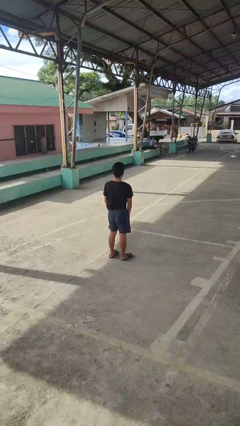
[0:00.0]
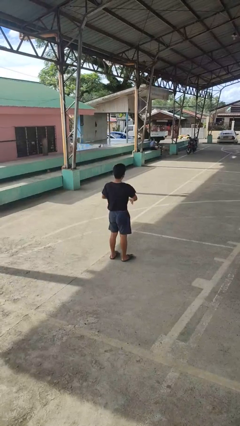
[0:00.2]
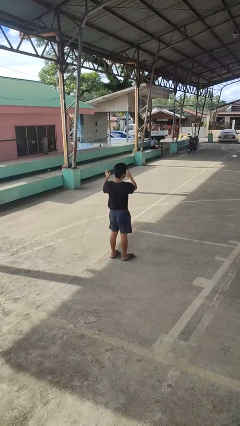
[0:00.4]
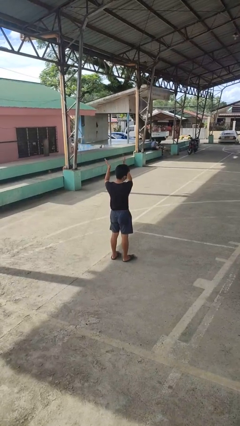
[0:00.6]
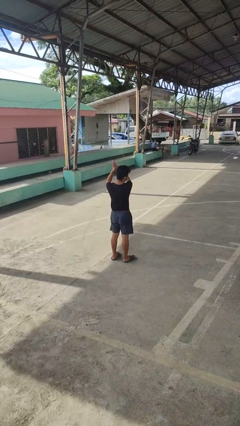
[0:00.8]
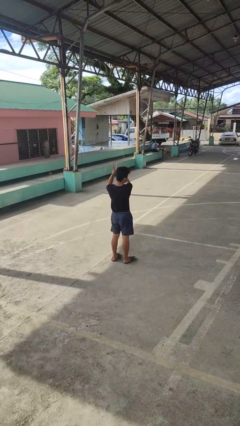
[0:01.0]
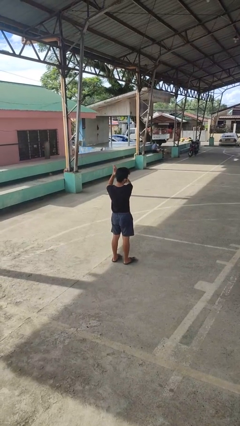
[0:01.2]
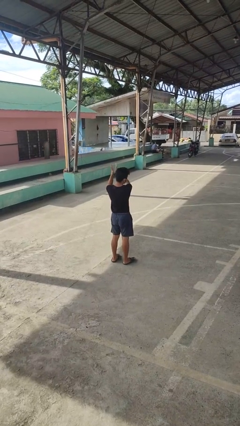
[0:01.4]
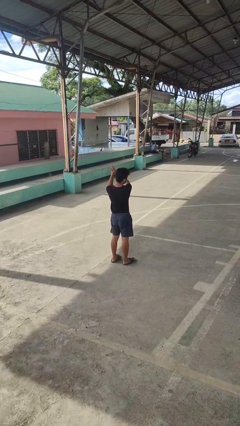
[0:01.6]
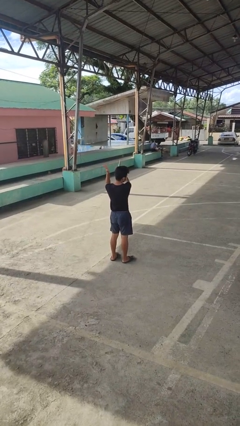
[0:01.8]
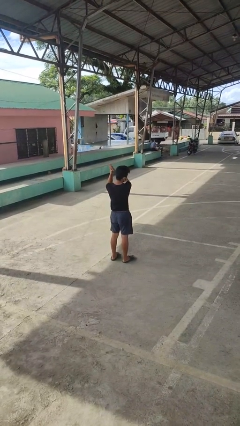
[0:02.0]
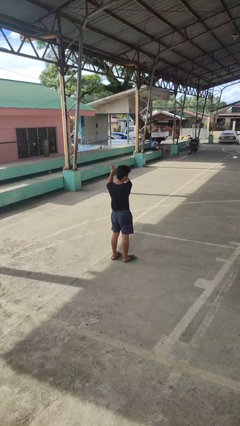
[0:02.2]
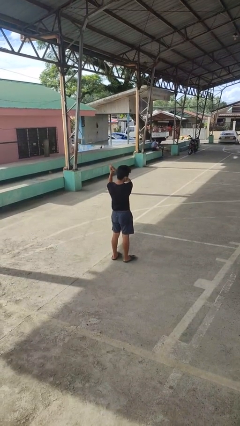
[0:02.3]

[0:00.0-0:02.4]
person claps hands

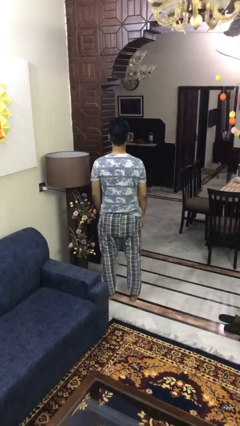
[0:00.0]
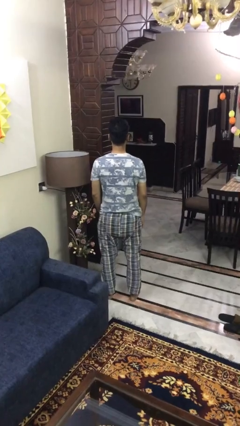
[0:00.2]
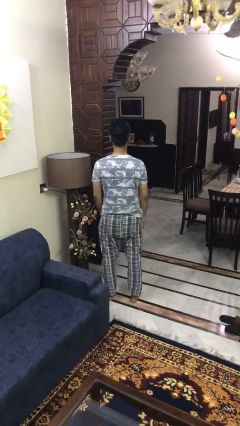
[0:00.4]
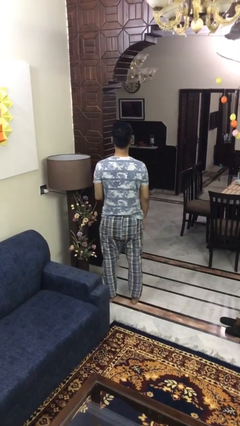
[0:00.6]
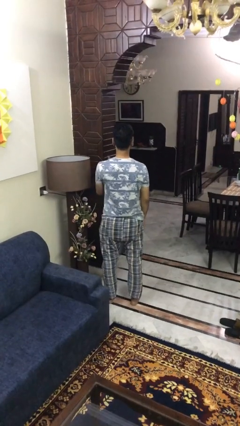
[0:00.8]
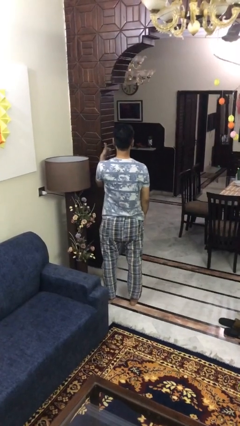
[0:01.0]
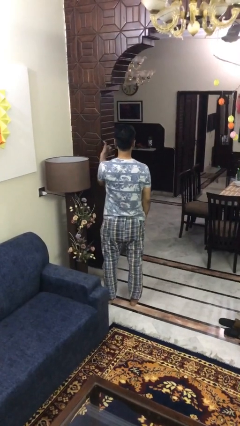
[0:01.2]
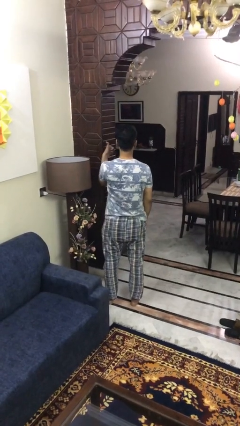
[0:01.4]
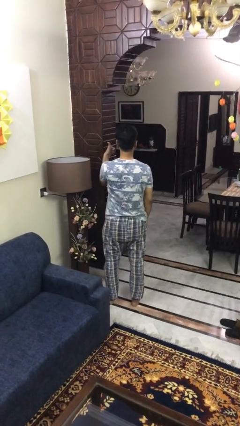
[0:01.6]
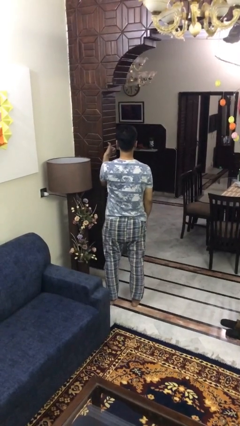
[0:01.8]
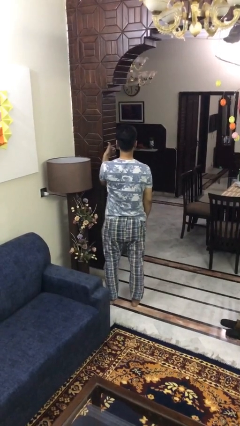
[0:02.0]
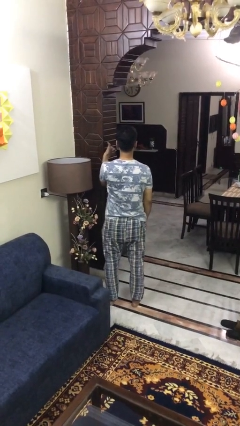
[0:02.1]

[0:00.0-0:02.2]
person gestures thumbs up

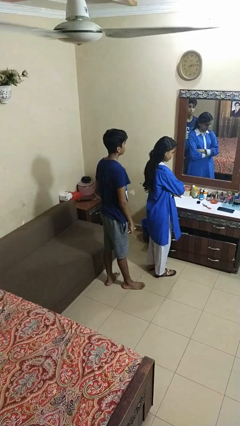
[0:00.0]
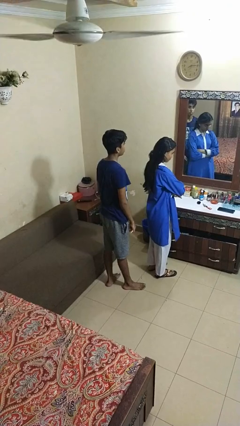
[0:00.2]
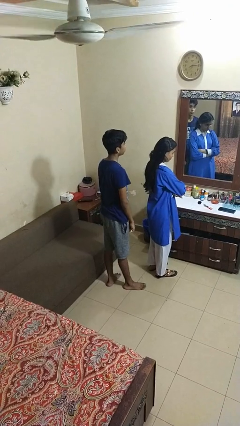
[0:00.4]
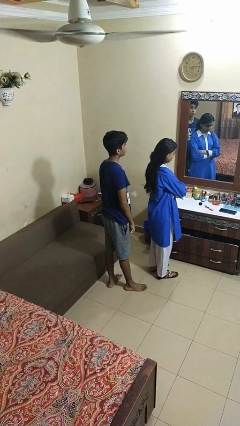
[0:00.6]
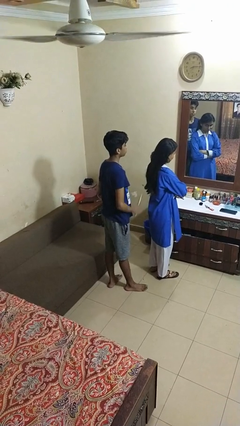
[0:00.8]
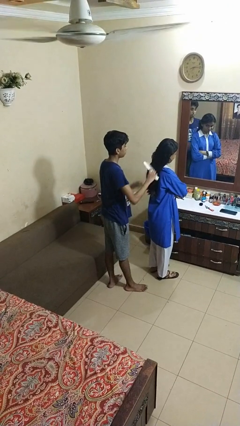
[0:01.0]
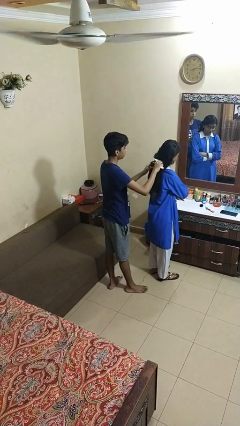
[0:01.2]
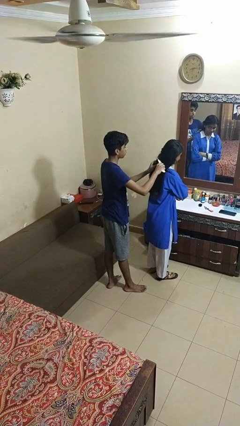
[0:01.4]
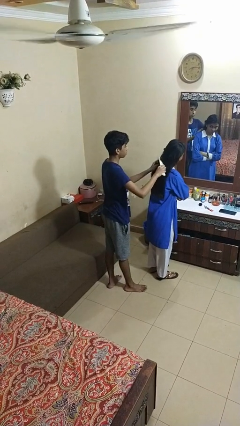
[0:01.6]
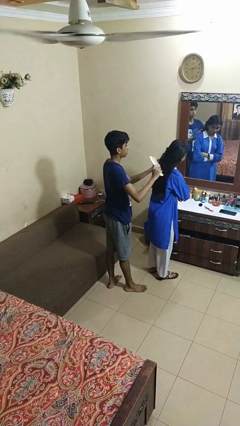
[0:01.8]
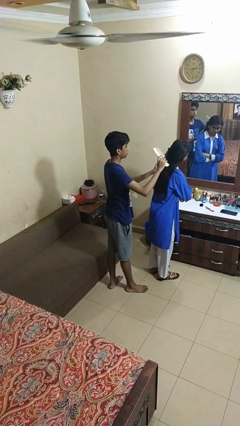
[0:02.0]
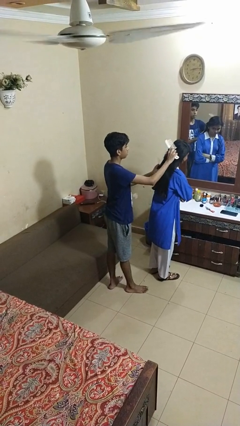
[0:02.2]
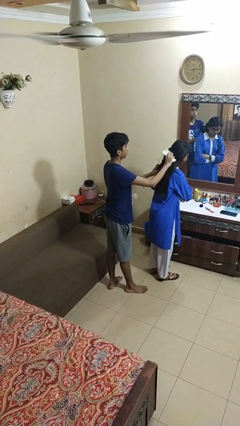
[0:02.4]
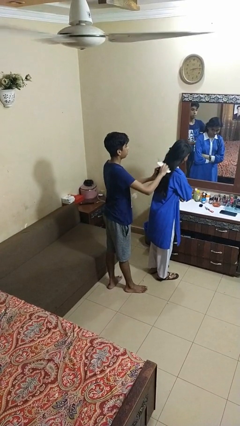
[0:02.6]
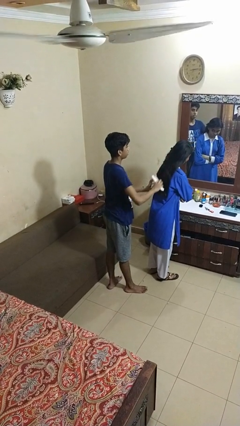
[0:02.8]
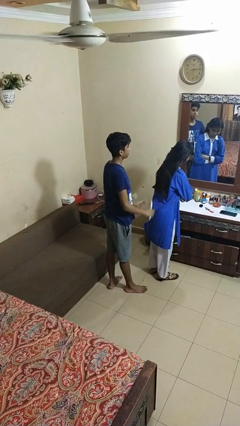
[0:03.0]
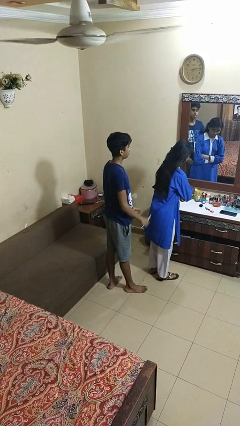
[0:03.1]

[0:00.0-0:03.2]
person brushes hair of person

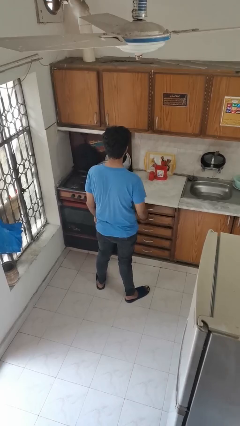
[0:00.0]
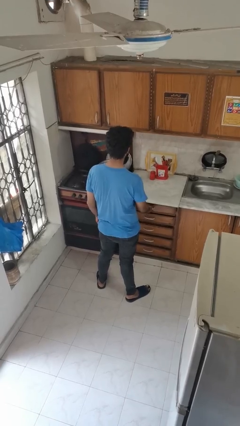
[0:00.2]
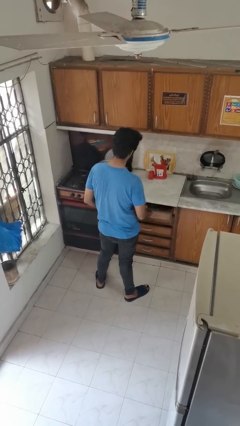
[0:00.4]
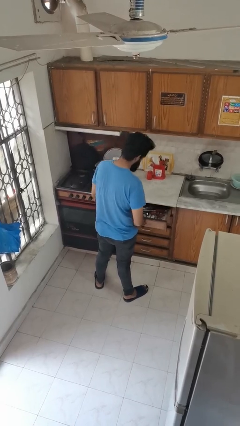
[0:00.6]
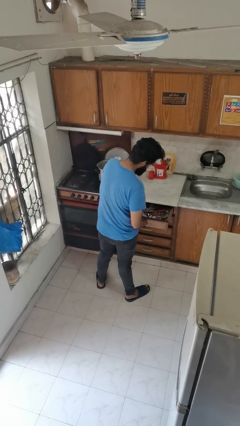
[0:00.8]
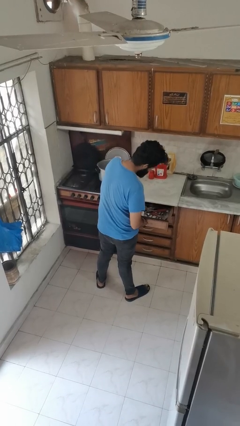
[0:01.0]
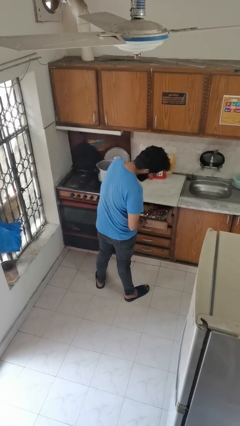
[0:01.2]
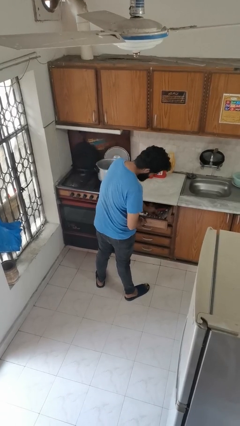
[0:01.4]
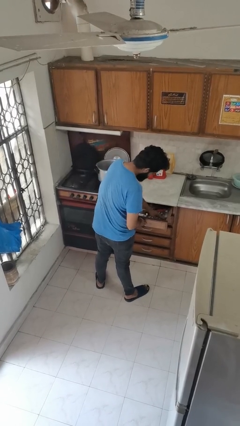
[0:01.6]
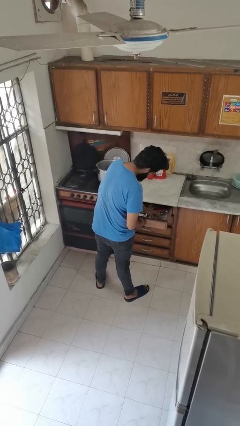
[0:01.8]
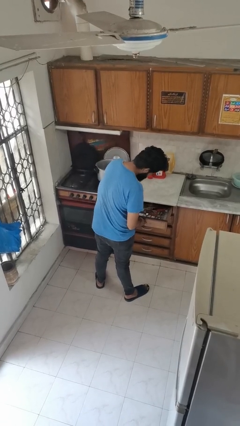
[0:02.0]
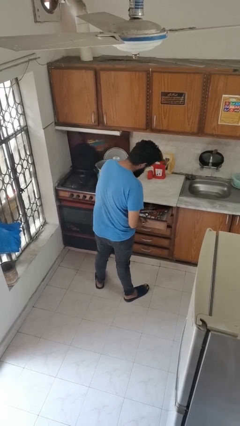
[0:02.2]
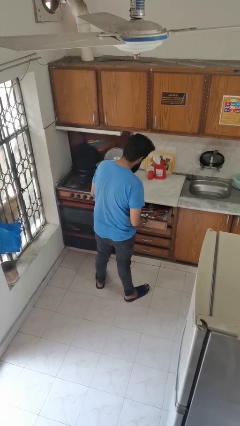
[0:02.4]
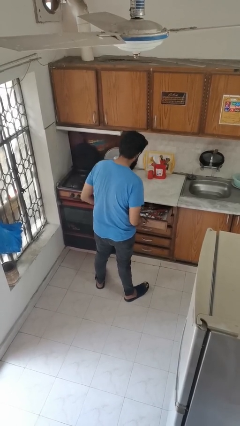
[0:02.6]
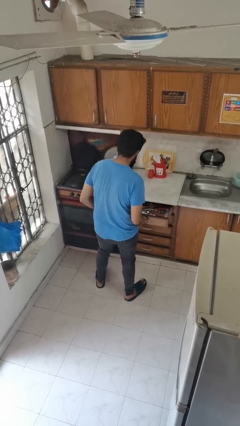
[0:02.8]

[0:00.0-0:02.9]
person searches in kitchen drawer

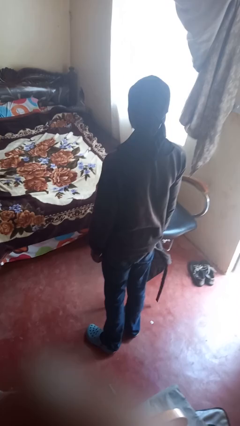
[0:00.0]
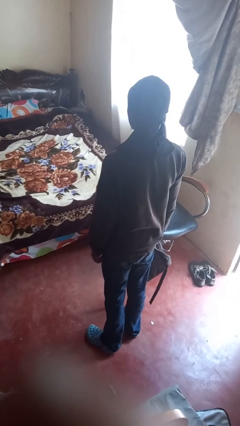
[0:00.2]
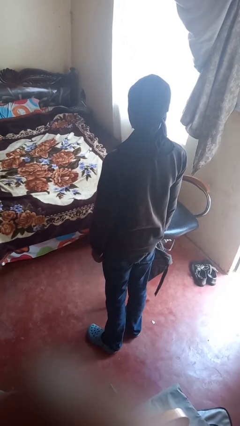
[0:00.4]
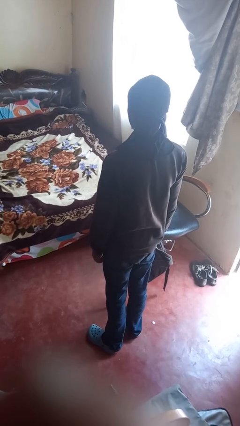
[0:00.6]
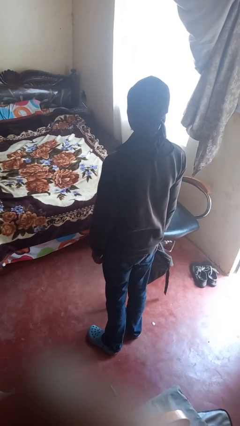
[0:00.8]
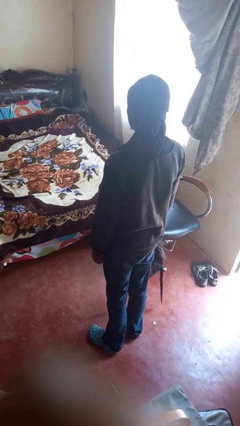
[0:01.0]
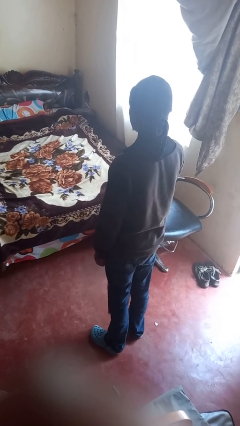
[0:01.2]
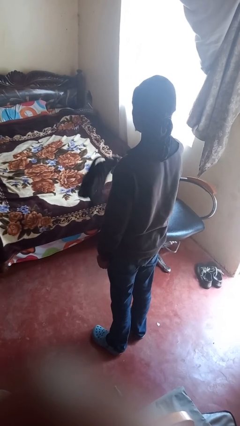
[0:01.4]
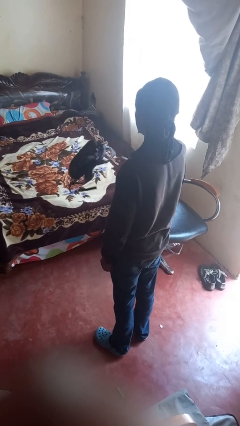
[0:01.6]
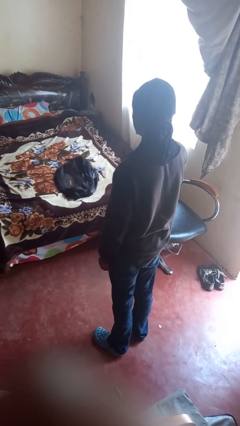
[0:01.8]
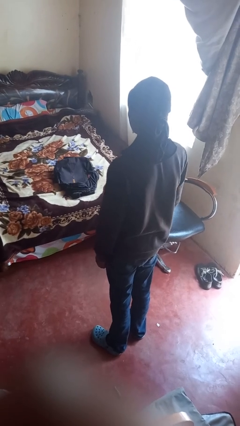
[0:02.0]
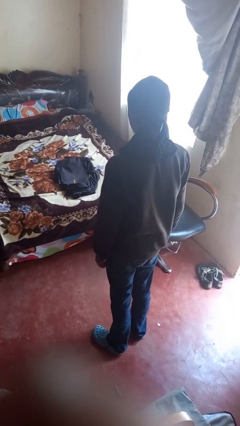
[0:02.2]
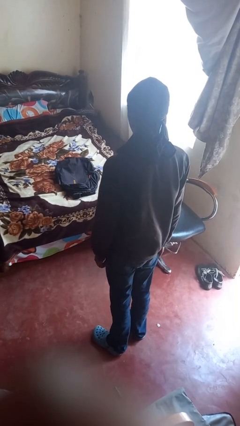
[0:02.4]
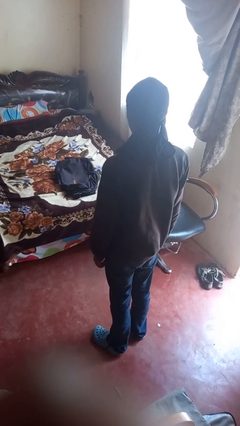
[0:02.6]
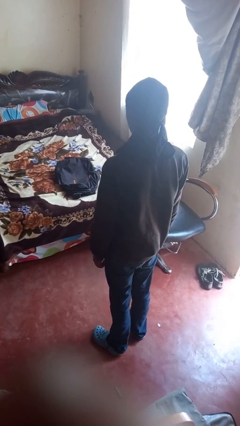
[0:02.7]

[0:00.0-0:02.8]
person throws object on bed

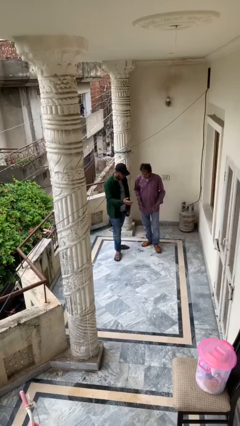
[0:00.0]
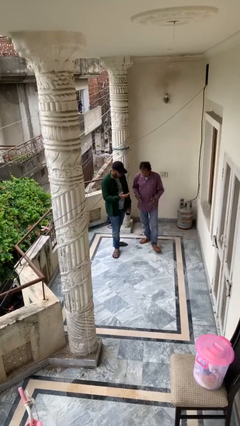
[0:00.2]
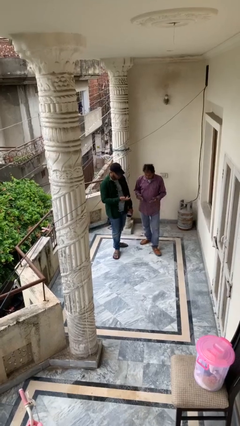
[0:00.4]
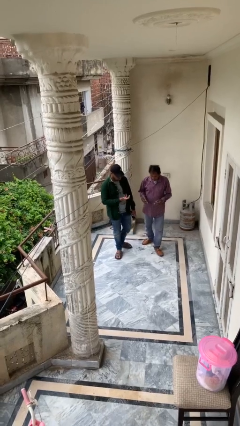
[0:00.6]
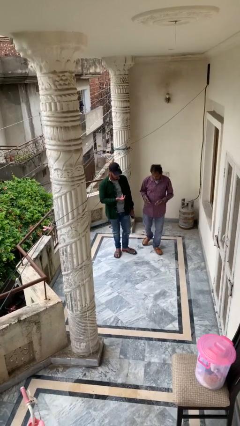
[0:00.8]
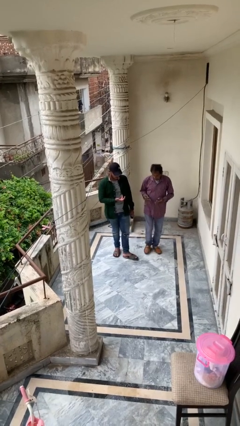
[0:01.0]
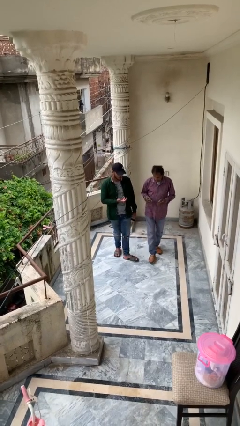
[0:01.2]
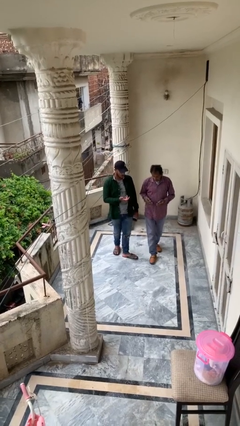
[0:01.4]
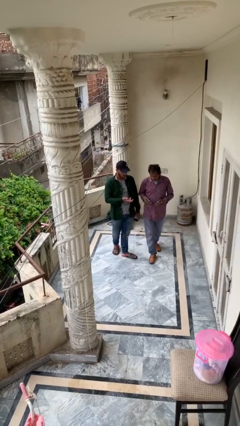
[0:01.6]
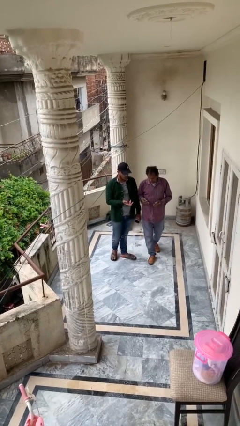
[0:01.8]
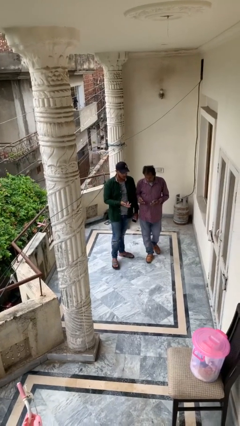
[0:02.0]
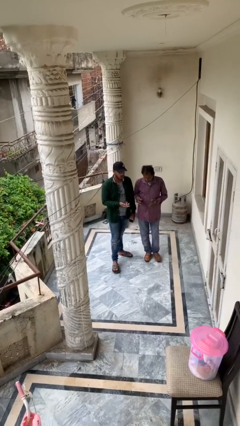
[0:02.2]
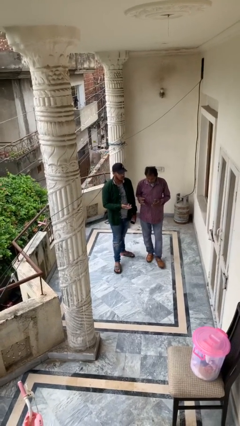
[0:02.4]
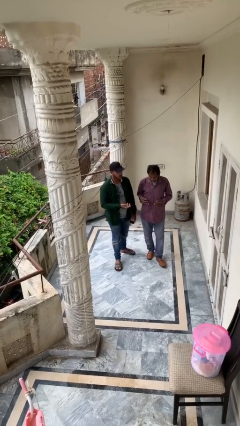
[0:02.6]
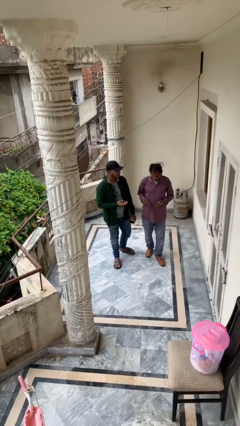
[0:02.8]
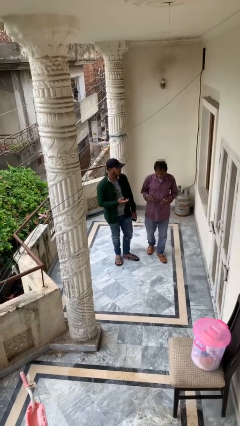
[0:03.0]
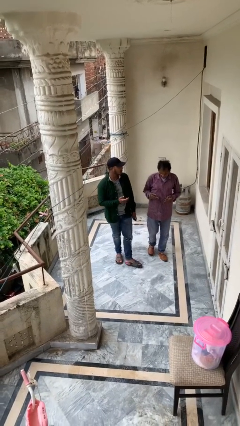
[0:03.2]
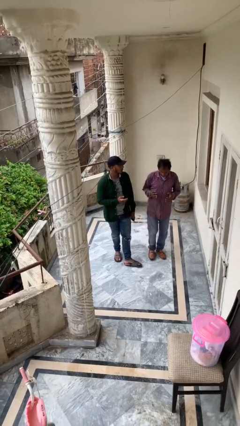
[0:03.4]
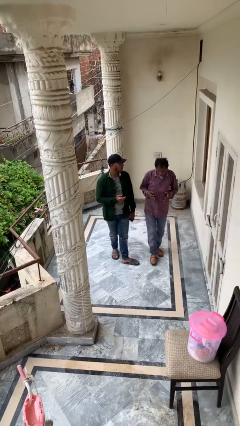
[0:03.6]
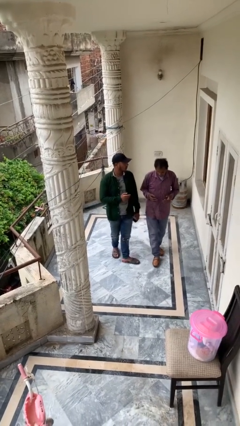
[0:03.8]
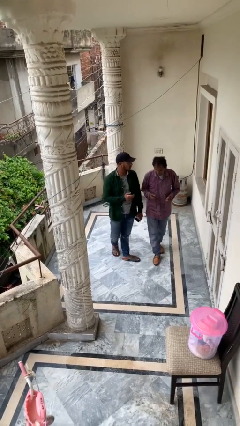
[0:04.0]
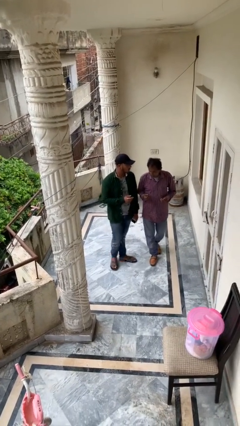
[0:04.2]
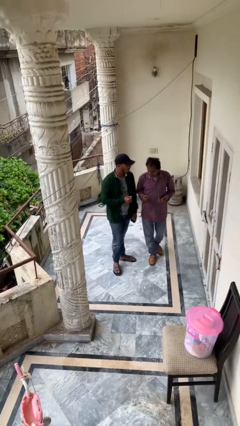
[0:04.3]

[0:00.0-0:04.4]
person talks to person
